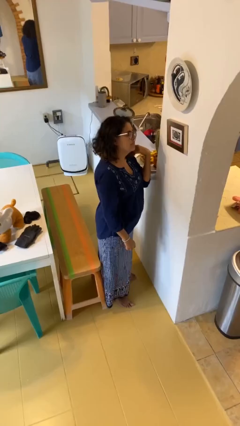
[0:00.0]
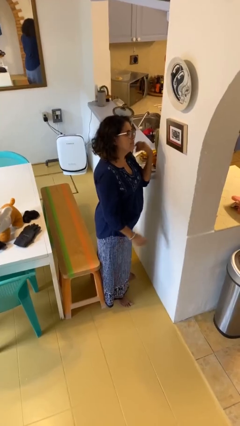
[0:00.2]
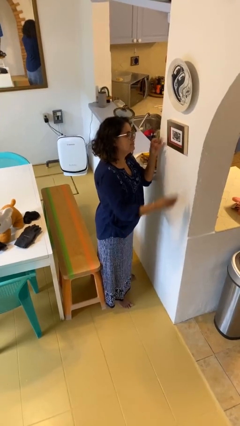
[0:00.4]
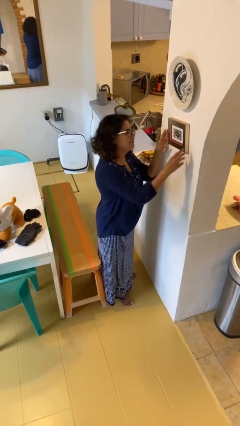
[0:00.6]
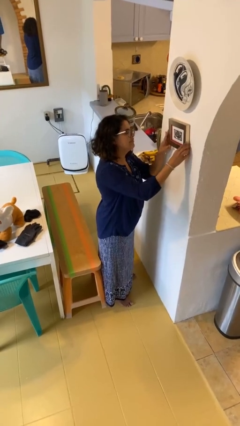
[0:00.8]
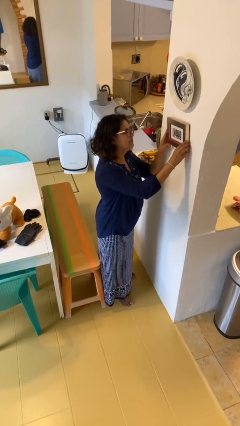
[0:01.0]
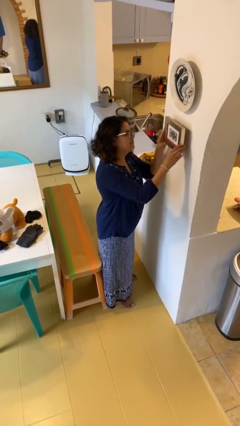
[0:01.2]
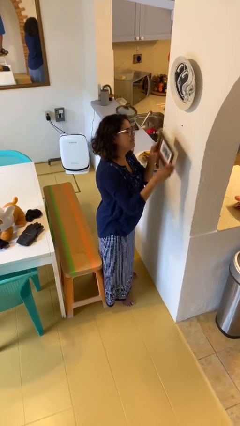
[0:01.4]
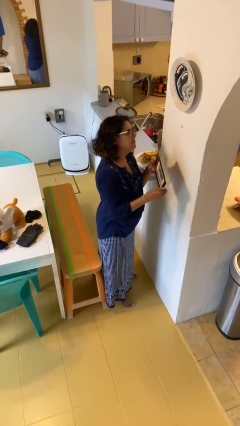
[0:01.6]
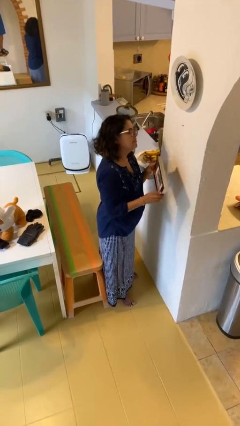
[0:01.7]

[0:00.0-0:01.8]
person takes down picture frame

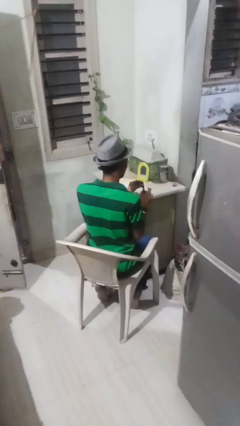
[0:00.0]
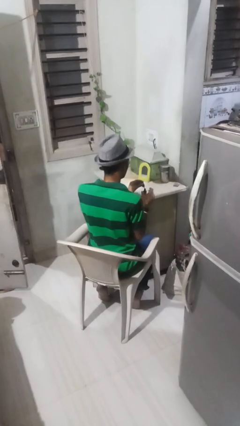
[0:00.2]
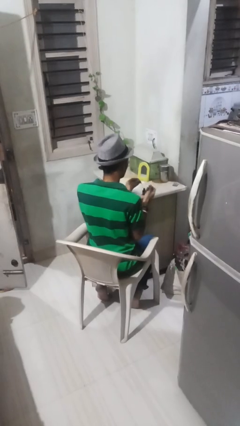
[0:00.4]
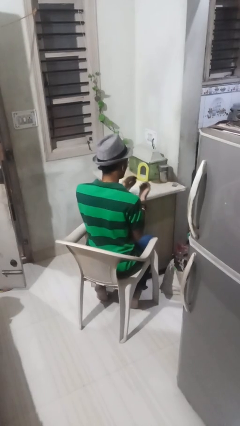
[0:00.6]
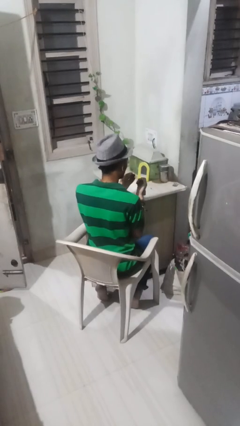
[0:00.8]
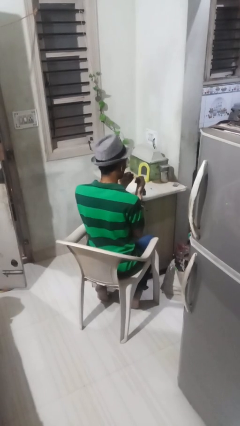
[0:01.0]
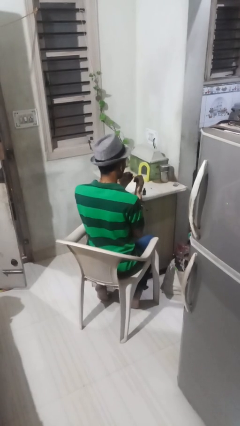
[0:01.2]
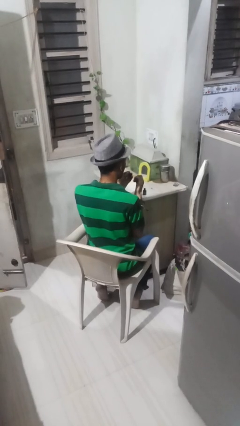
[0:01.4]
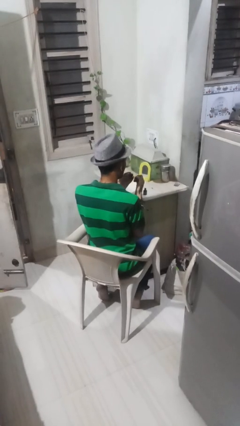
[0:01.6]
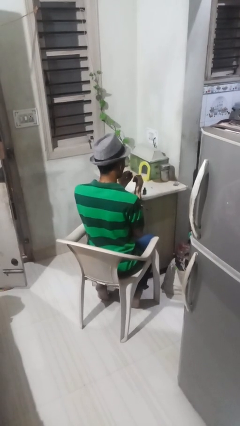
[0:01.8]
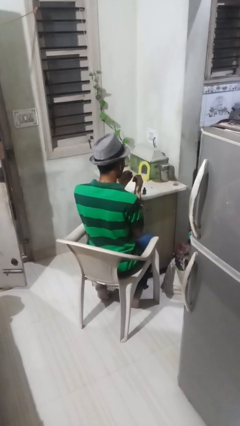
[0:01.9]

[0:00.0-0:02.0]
person paints fingernails

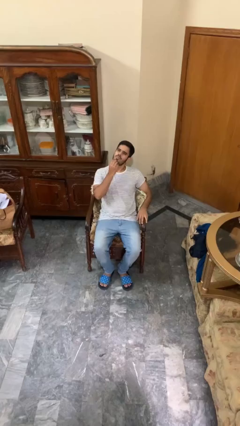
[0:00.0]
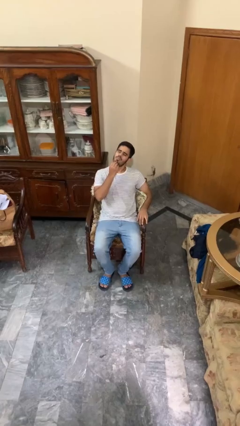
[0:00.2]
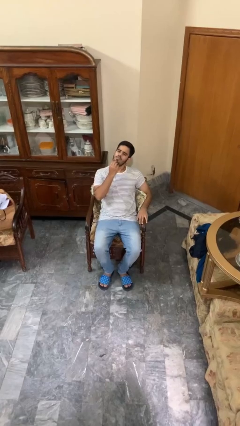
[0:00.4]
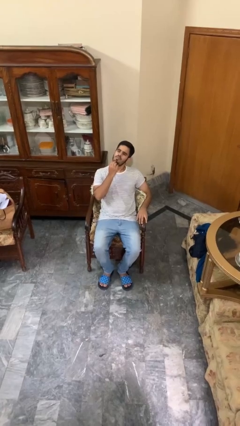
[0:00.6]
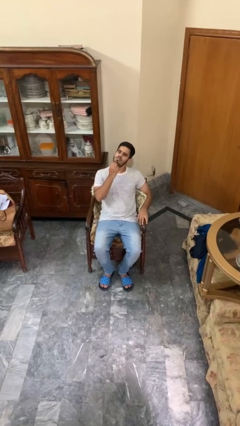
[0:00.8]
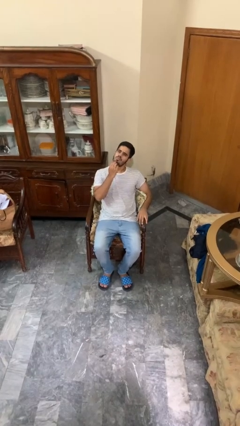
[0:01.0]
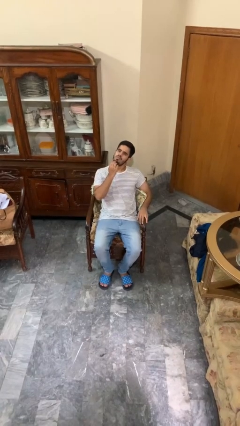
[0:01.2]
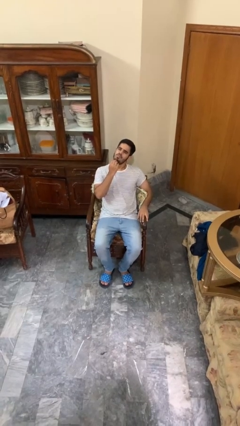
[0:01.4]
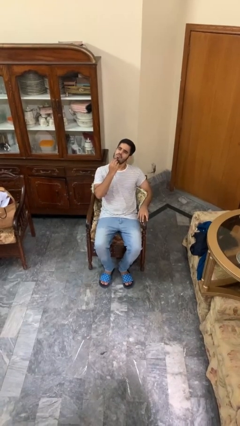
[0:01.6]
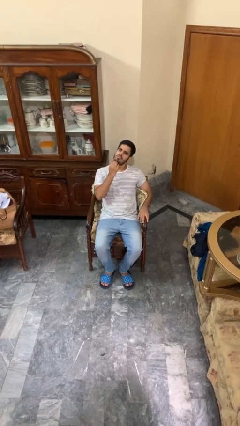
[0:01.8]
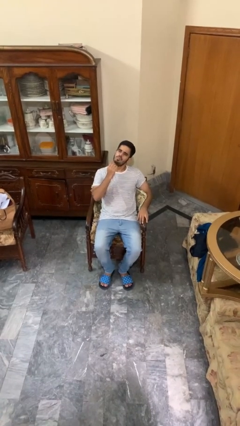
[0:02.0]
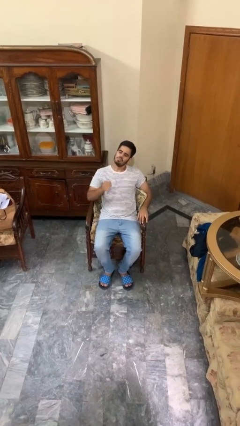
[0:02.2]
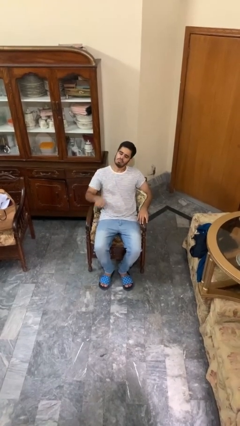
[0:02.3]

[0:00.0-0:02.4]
person strokes chin

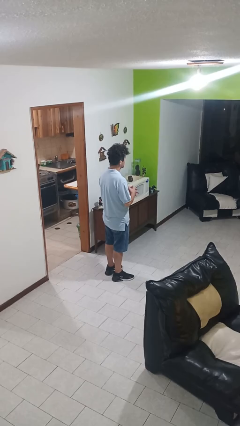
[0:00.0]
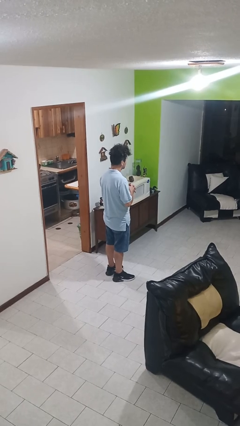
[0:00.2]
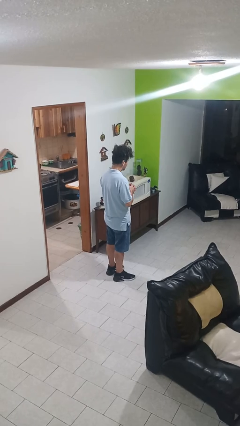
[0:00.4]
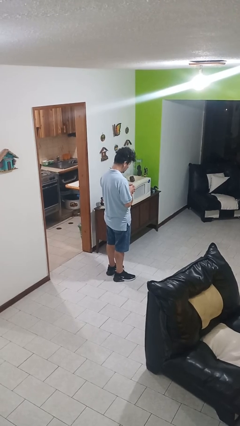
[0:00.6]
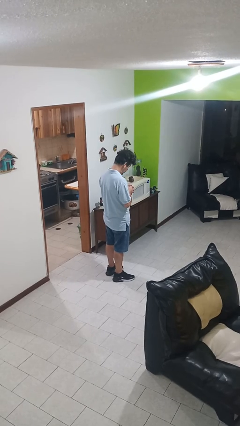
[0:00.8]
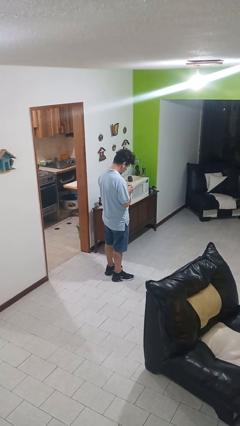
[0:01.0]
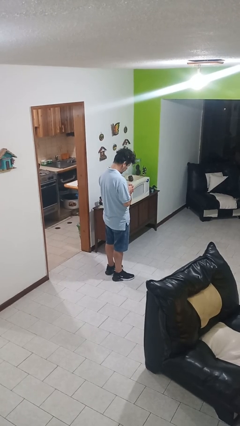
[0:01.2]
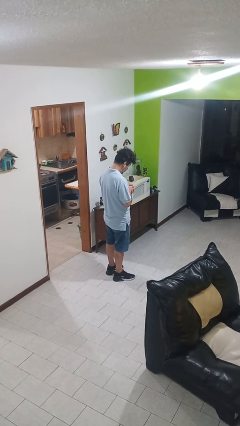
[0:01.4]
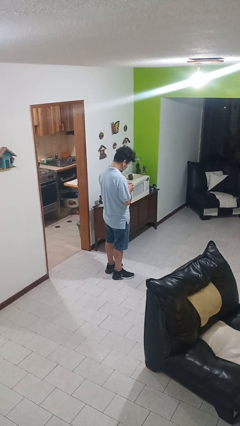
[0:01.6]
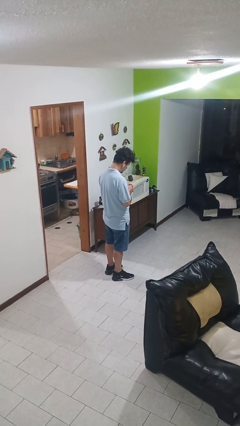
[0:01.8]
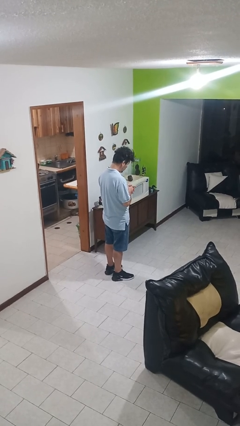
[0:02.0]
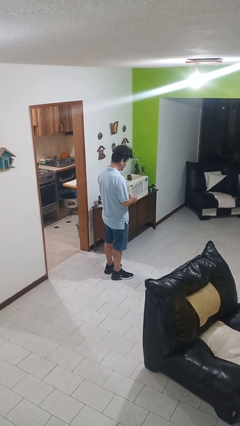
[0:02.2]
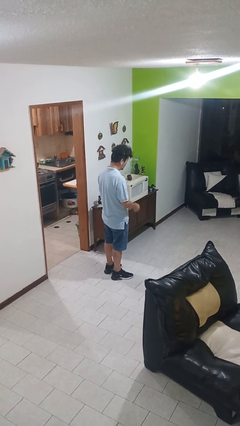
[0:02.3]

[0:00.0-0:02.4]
person prays

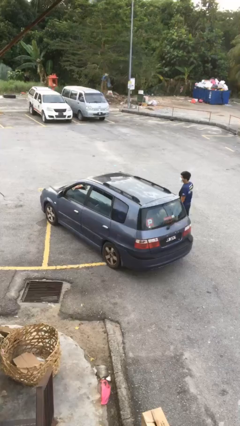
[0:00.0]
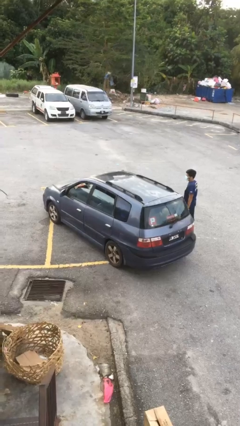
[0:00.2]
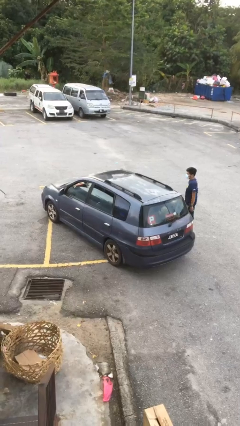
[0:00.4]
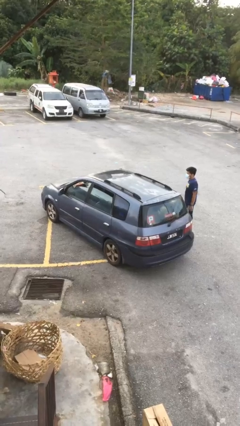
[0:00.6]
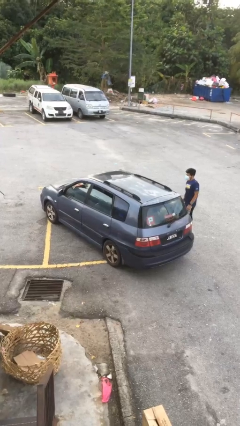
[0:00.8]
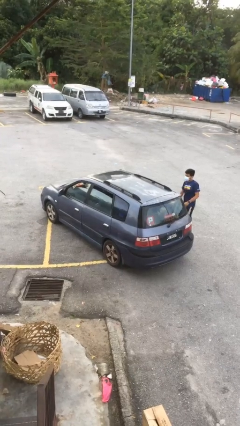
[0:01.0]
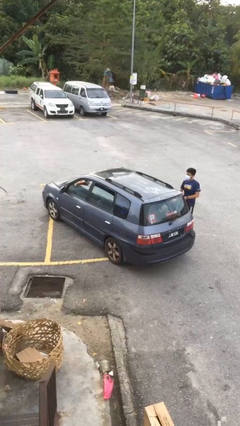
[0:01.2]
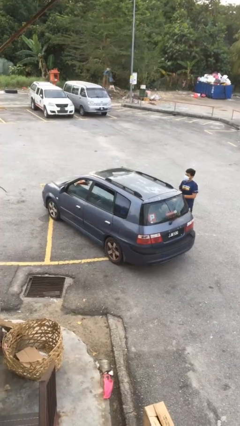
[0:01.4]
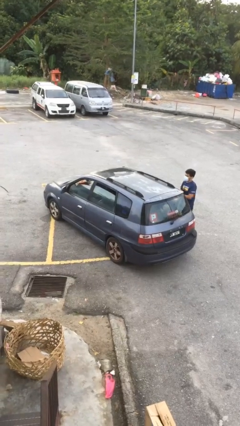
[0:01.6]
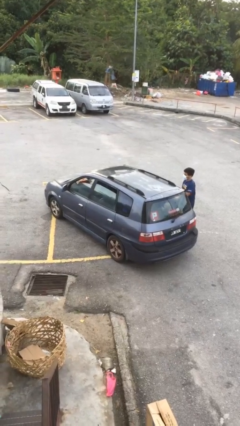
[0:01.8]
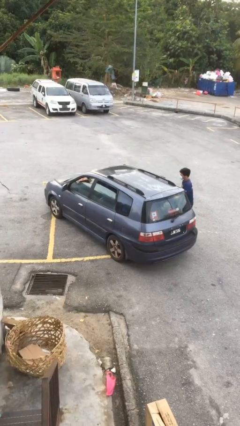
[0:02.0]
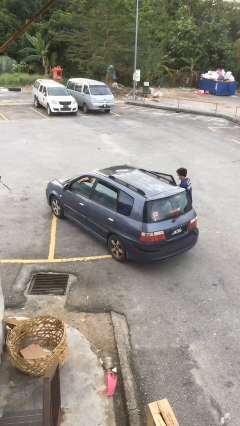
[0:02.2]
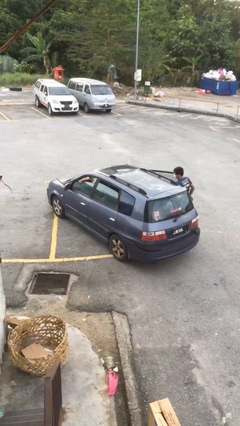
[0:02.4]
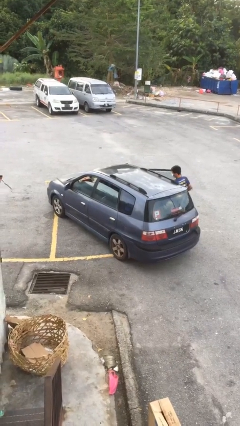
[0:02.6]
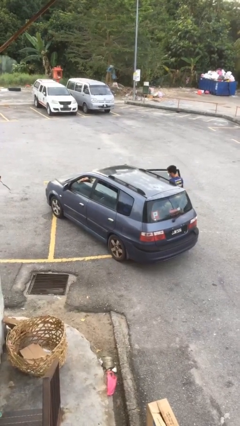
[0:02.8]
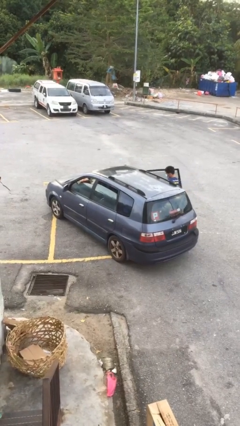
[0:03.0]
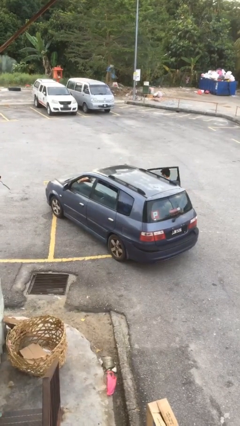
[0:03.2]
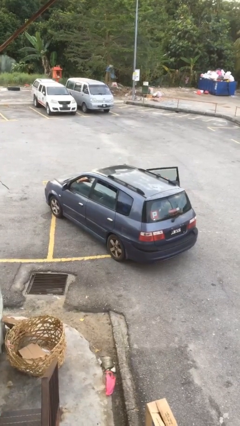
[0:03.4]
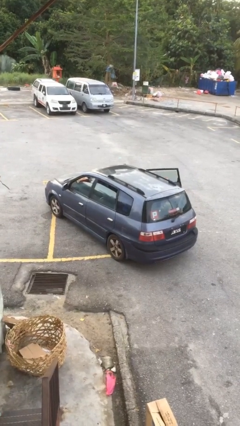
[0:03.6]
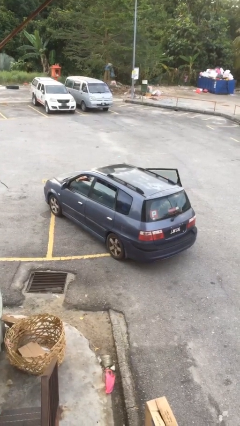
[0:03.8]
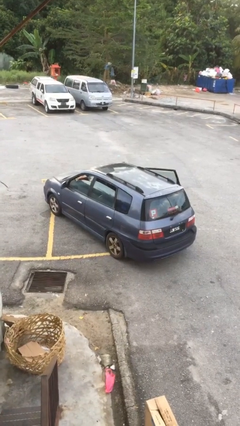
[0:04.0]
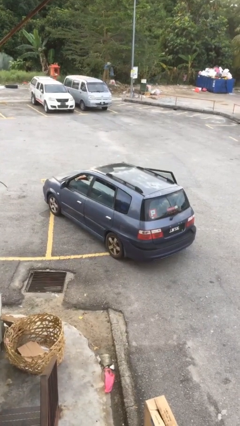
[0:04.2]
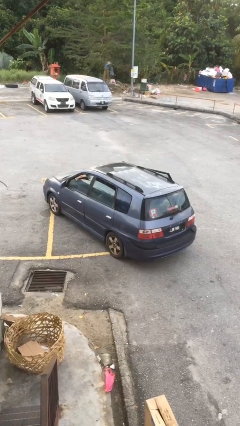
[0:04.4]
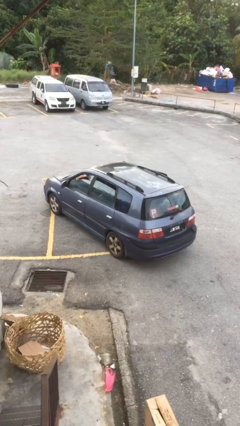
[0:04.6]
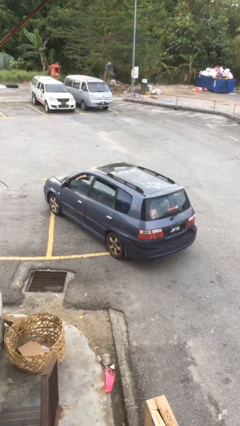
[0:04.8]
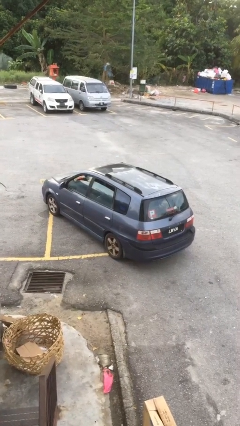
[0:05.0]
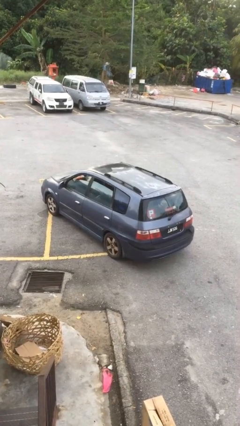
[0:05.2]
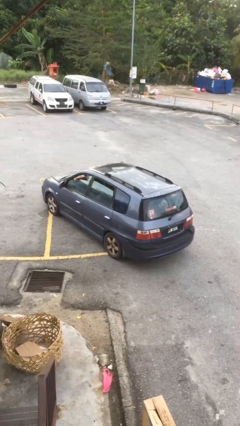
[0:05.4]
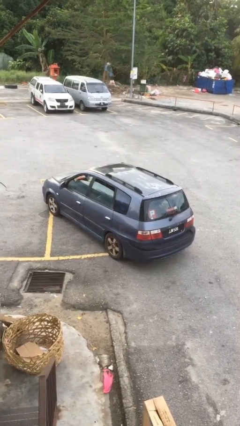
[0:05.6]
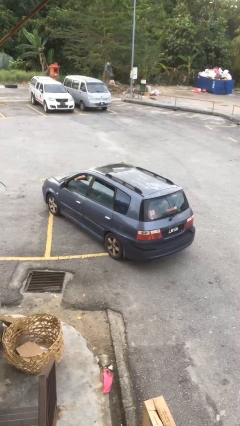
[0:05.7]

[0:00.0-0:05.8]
car picks up person

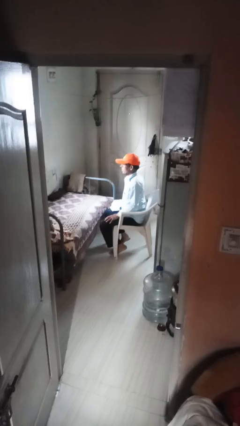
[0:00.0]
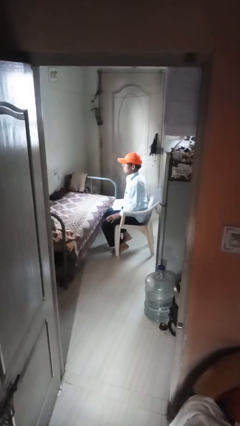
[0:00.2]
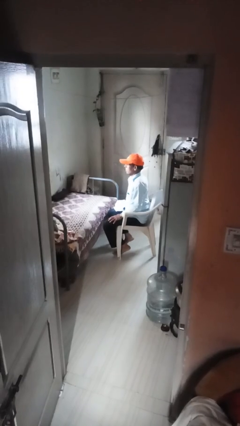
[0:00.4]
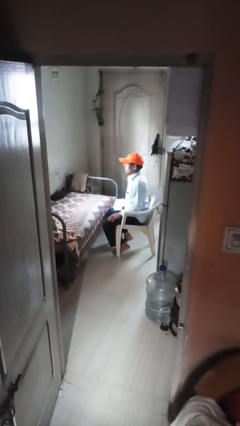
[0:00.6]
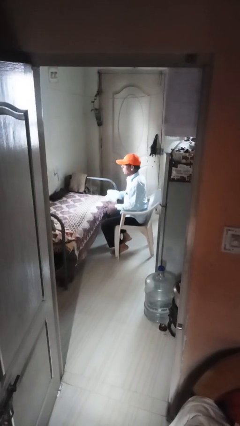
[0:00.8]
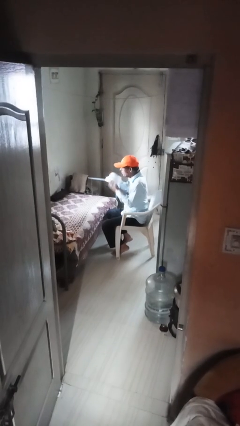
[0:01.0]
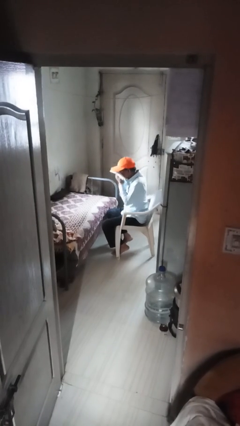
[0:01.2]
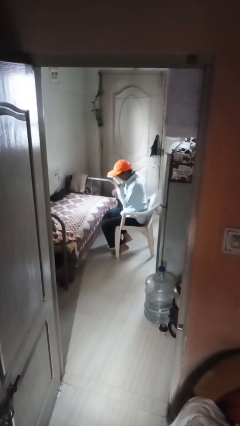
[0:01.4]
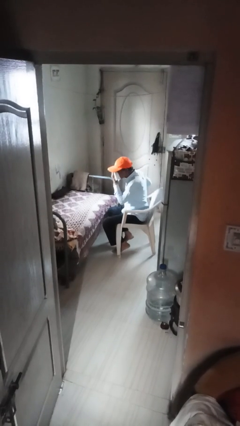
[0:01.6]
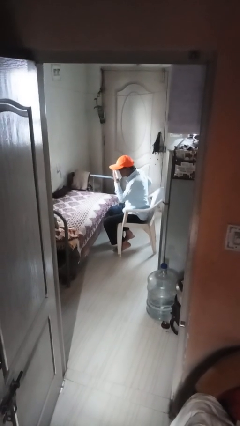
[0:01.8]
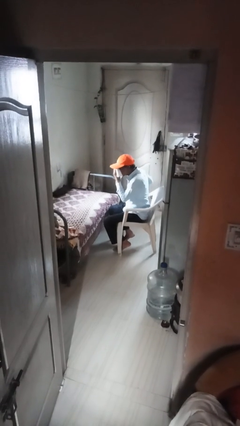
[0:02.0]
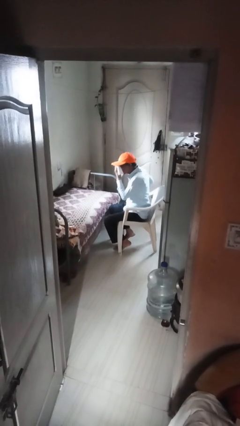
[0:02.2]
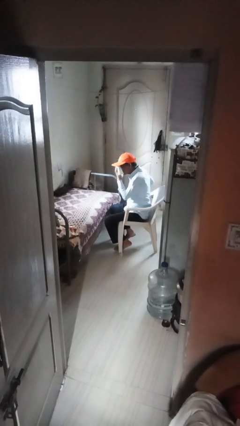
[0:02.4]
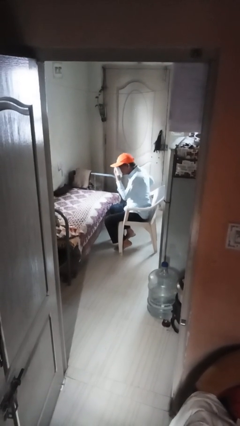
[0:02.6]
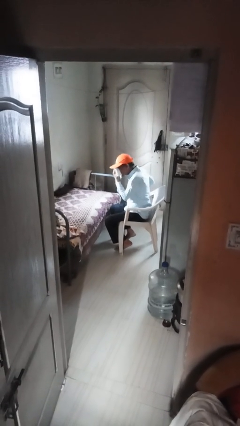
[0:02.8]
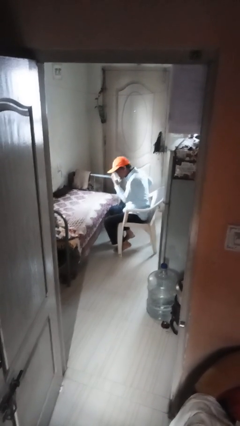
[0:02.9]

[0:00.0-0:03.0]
person blows nose
